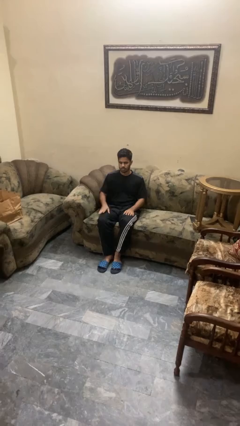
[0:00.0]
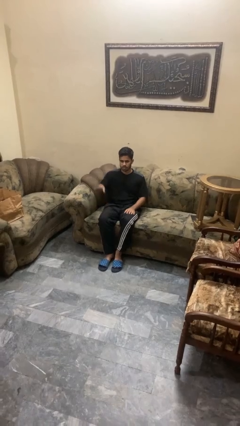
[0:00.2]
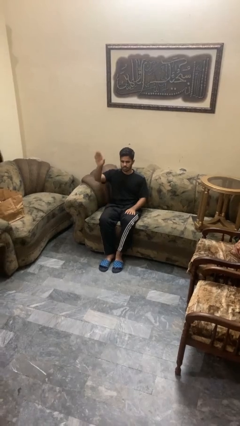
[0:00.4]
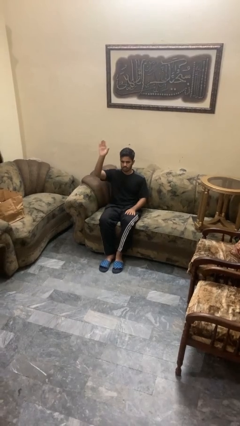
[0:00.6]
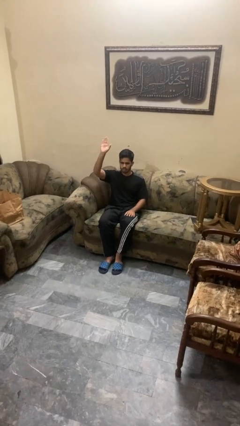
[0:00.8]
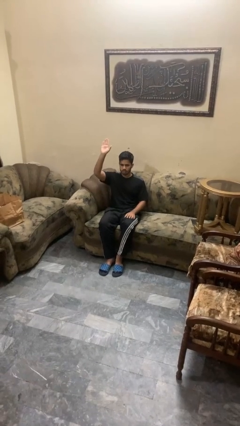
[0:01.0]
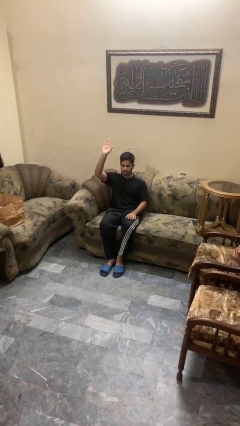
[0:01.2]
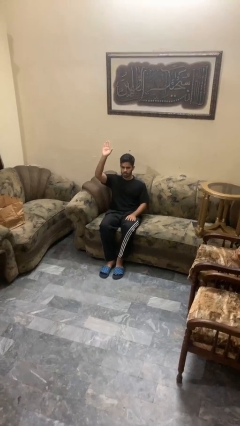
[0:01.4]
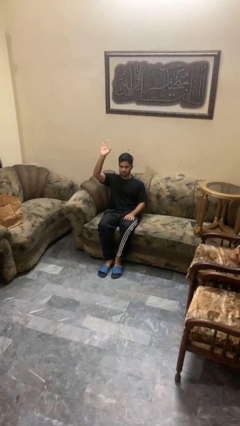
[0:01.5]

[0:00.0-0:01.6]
person gestures raise hand

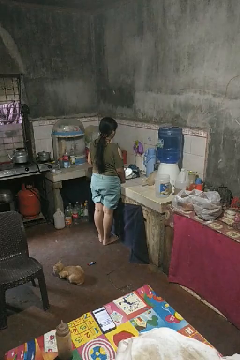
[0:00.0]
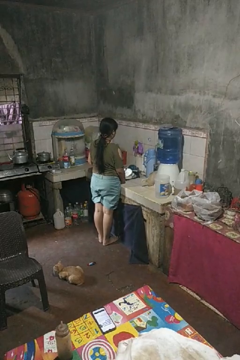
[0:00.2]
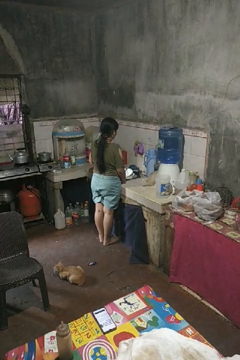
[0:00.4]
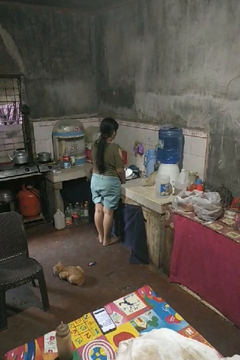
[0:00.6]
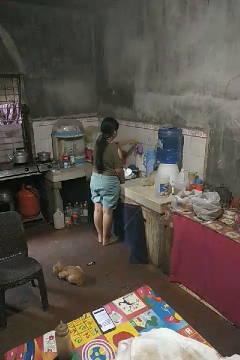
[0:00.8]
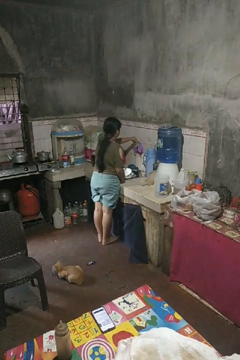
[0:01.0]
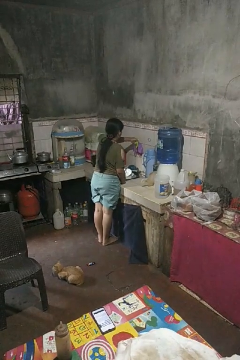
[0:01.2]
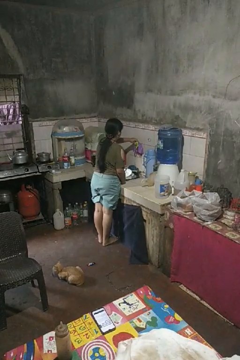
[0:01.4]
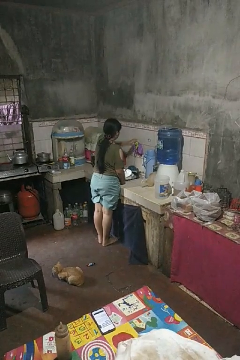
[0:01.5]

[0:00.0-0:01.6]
person turns off faucet

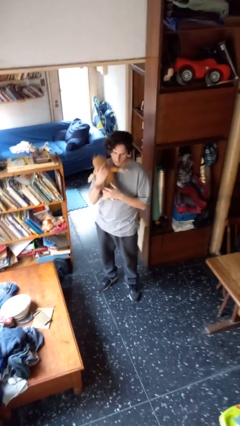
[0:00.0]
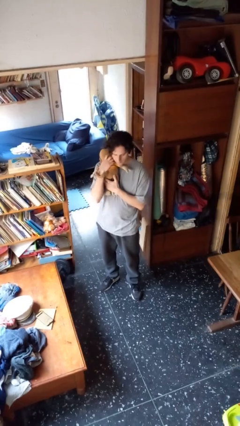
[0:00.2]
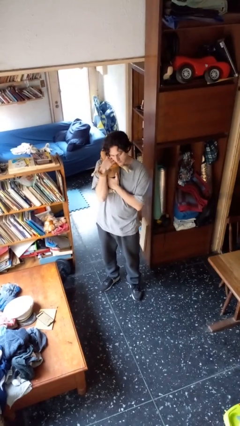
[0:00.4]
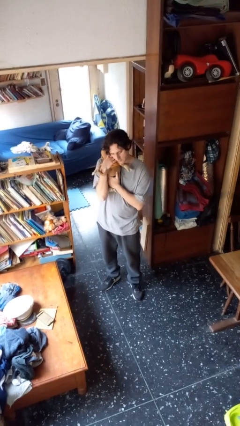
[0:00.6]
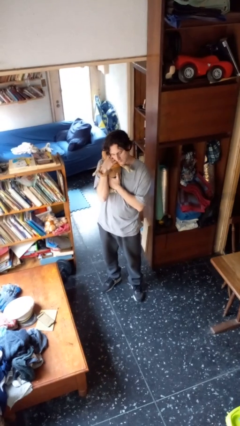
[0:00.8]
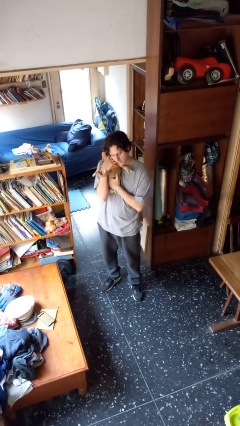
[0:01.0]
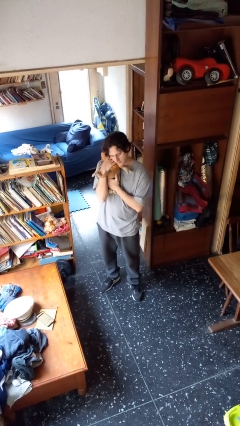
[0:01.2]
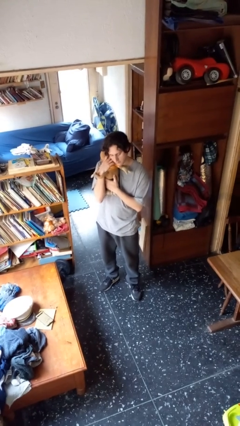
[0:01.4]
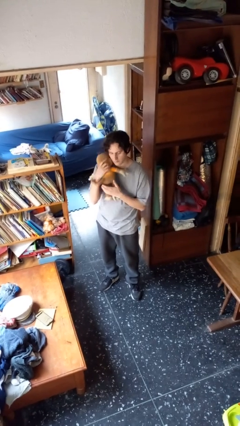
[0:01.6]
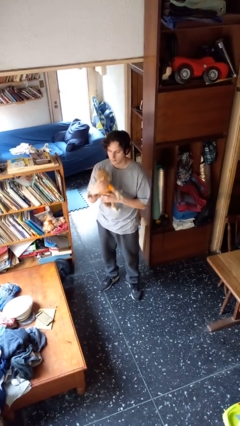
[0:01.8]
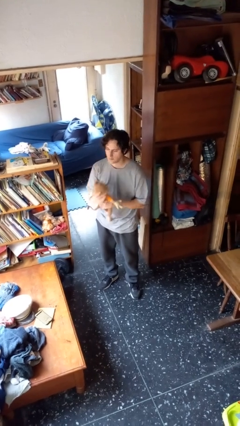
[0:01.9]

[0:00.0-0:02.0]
person hugs stuffed animal

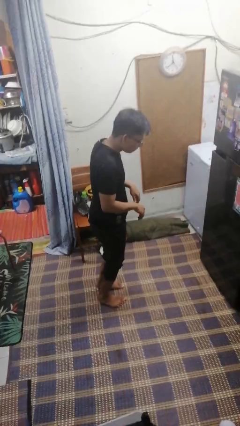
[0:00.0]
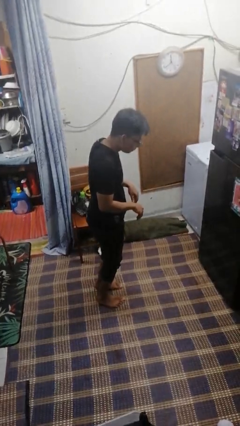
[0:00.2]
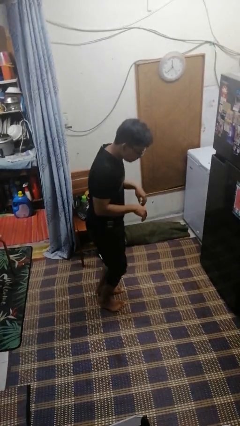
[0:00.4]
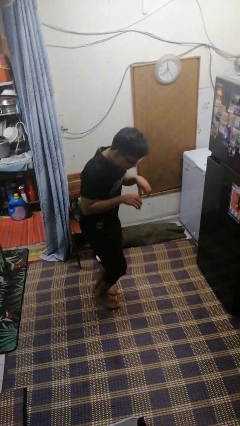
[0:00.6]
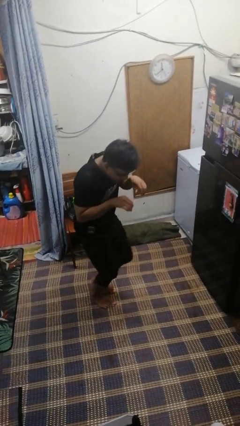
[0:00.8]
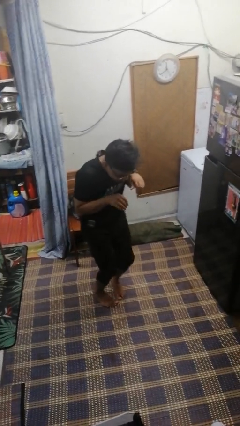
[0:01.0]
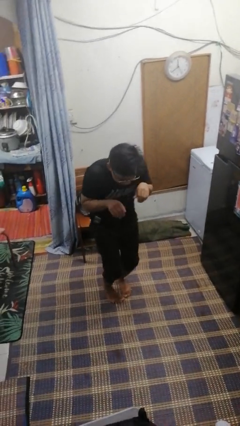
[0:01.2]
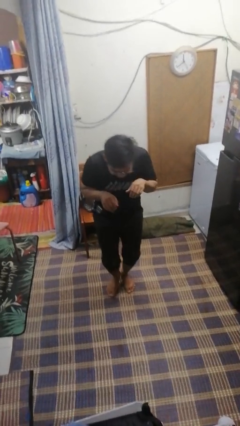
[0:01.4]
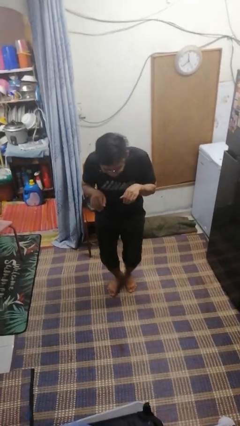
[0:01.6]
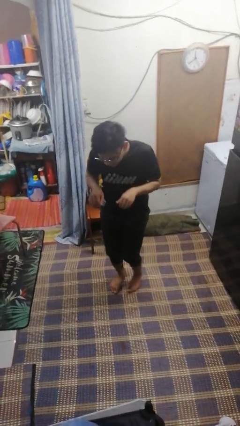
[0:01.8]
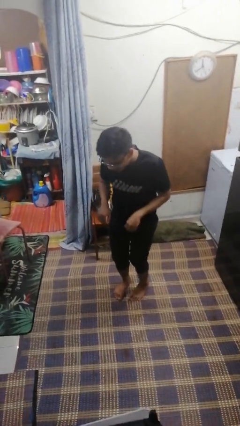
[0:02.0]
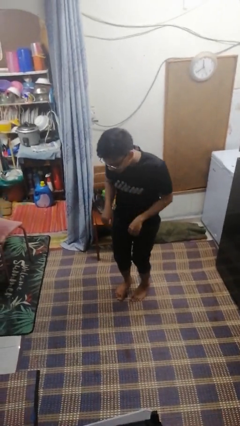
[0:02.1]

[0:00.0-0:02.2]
person walks tiptoe

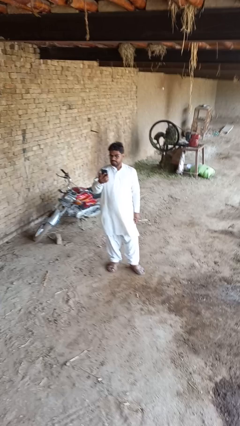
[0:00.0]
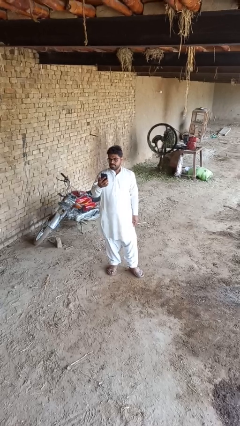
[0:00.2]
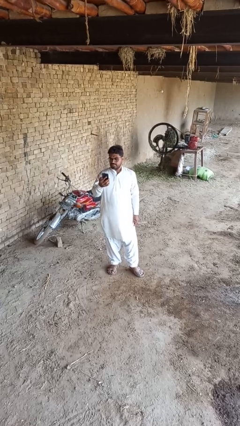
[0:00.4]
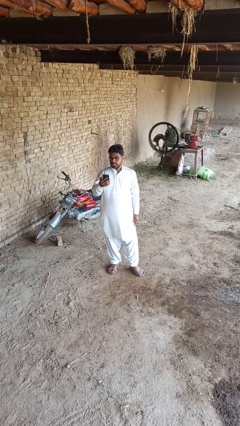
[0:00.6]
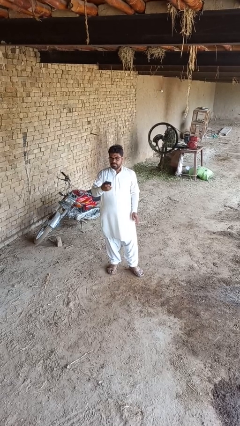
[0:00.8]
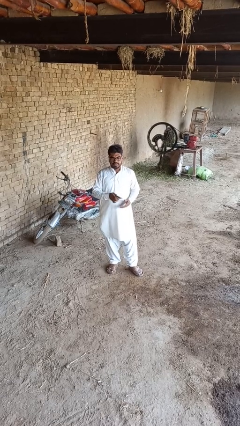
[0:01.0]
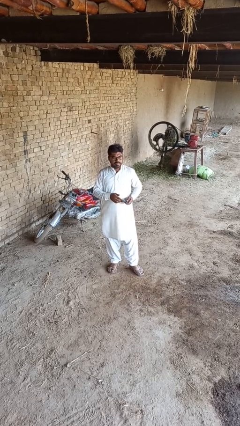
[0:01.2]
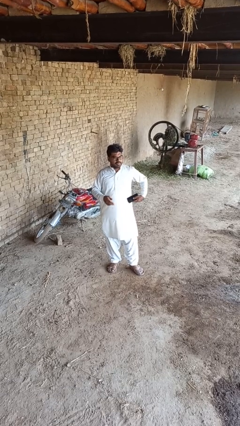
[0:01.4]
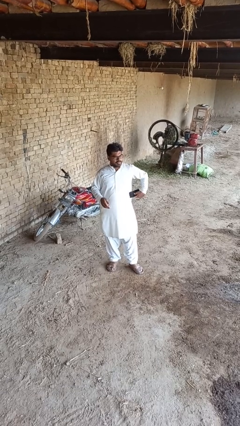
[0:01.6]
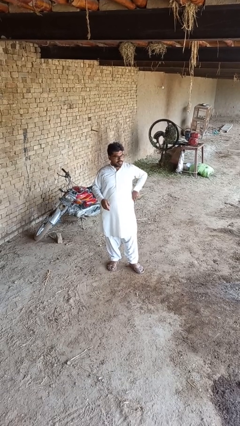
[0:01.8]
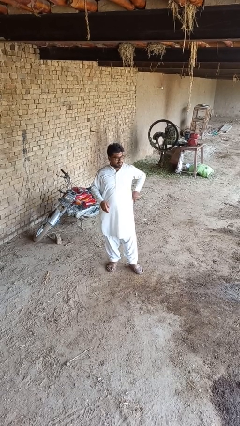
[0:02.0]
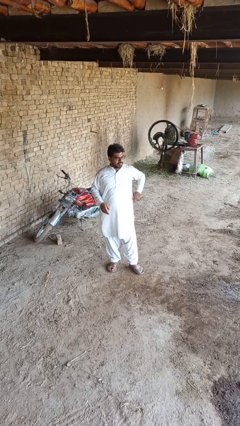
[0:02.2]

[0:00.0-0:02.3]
person puts phone into pocket

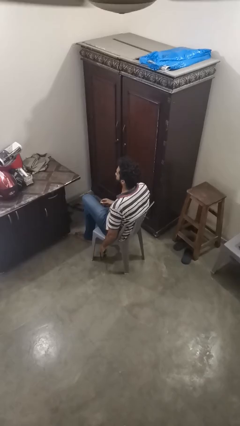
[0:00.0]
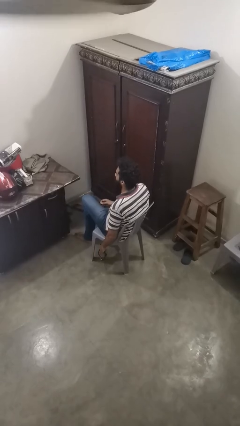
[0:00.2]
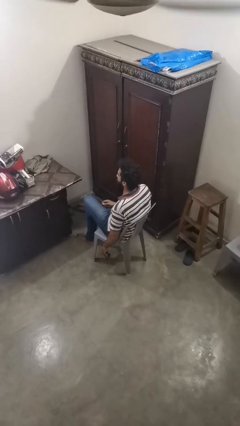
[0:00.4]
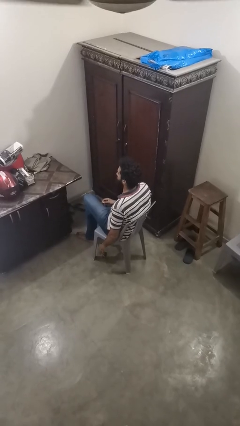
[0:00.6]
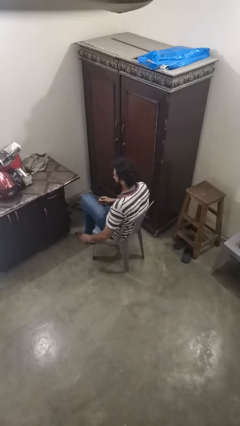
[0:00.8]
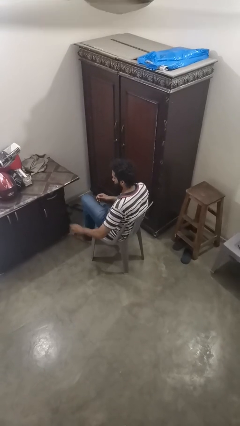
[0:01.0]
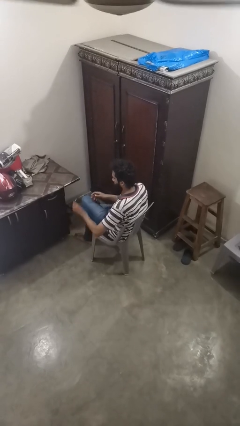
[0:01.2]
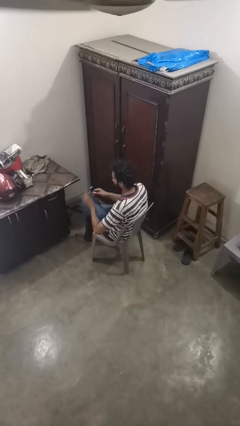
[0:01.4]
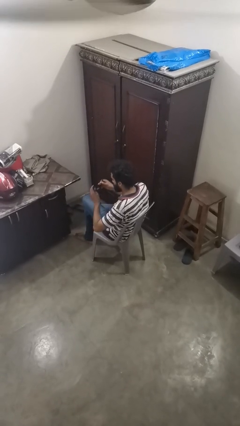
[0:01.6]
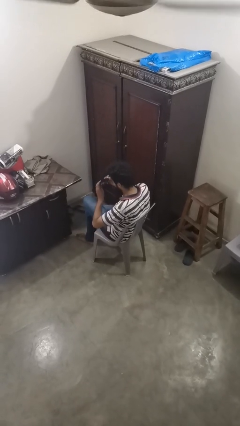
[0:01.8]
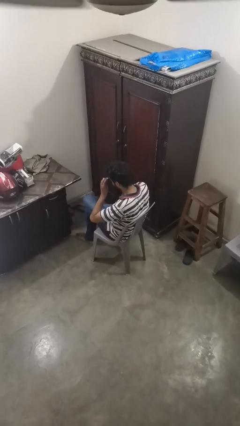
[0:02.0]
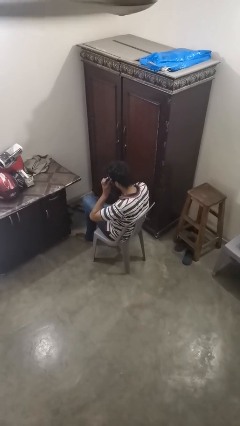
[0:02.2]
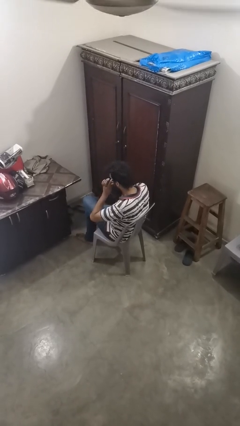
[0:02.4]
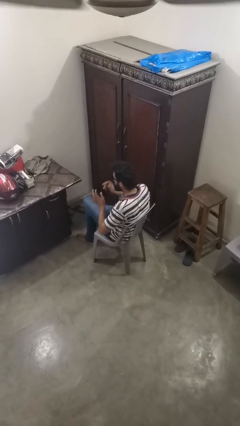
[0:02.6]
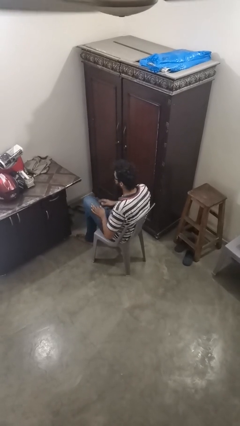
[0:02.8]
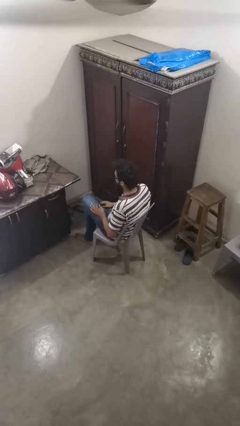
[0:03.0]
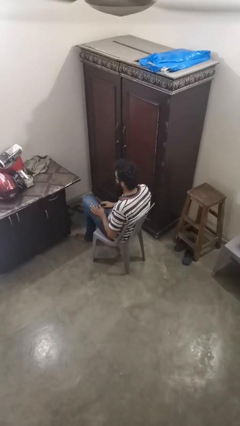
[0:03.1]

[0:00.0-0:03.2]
person puts on sunglasses

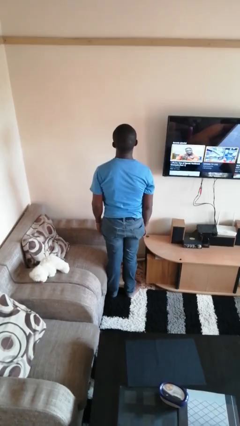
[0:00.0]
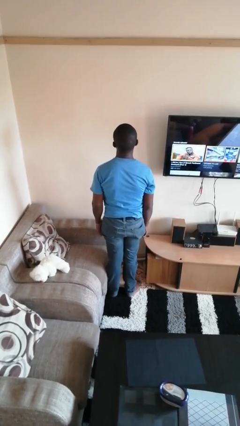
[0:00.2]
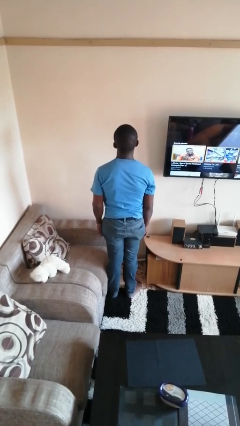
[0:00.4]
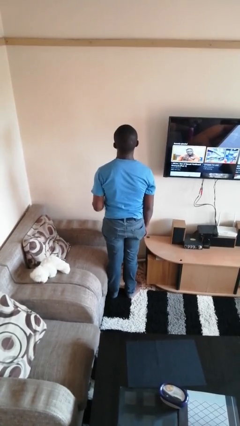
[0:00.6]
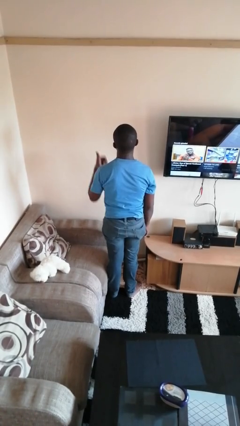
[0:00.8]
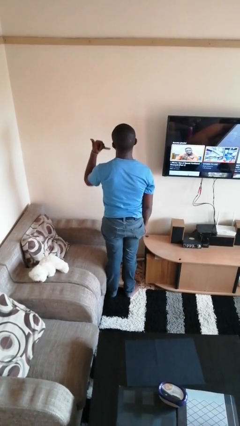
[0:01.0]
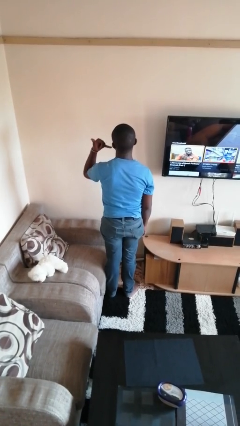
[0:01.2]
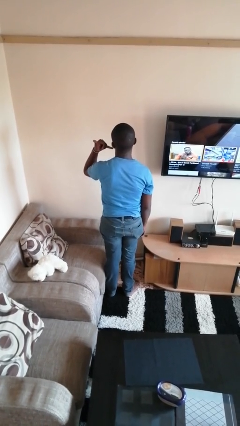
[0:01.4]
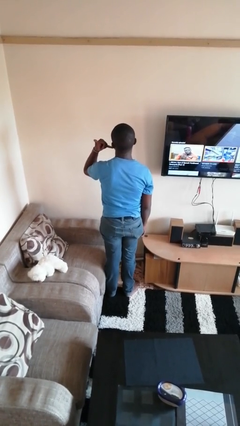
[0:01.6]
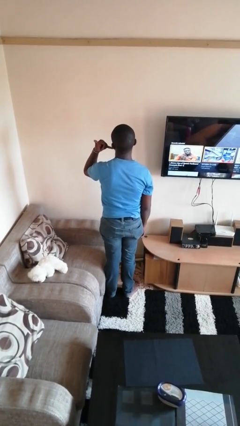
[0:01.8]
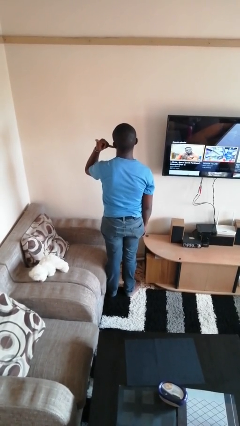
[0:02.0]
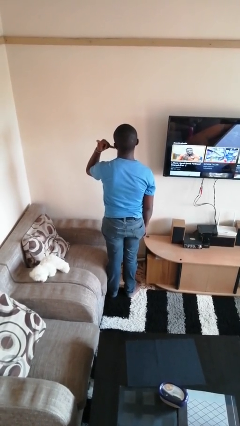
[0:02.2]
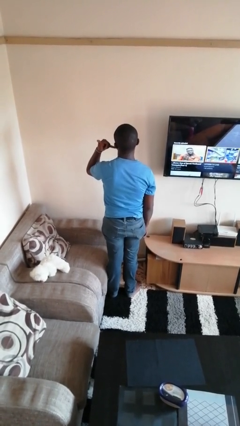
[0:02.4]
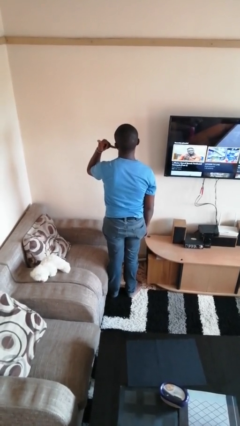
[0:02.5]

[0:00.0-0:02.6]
person gestures call me

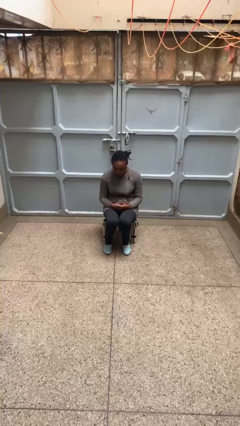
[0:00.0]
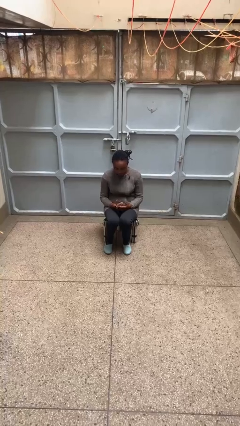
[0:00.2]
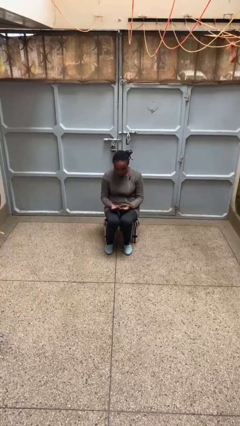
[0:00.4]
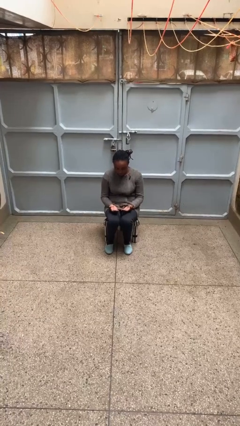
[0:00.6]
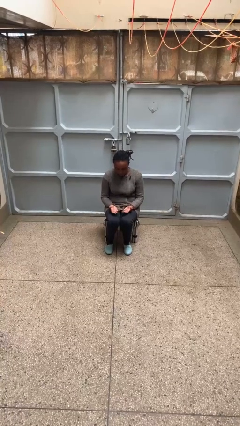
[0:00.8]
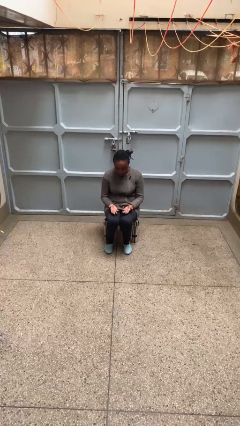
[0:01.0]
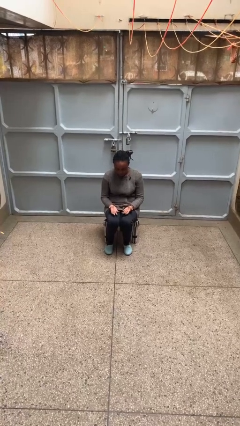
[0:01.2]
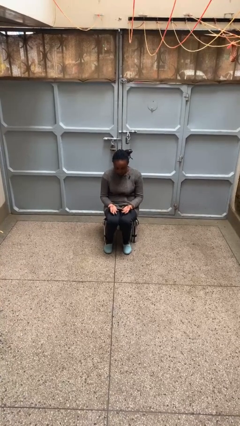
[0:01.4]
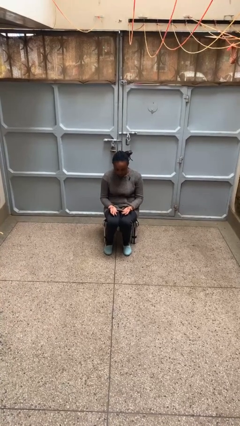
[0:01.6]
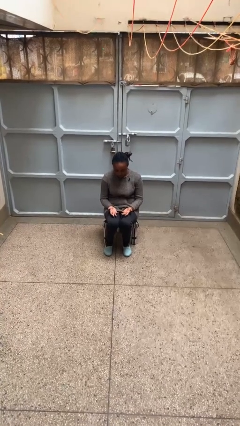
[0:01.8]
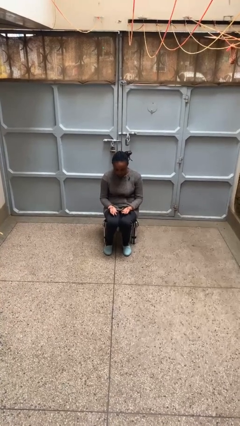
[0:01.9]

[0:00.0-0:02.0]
person looks at hands in lap
